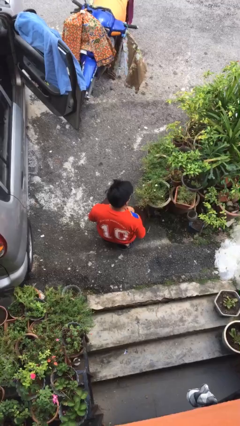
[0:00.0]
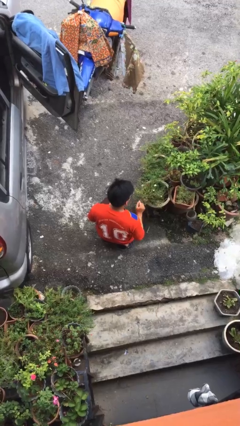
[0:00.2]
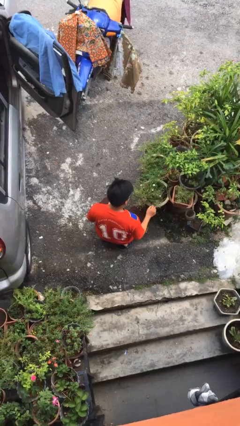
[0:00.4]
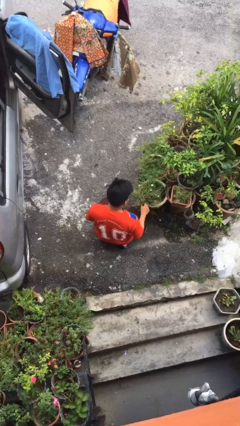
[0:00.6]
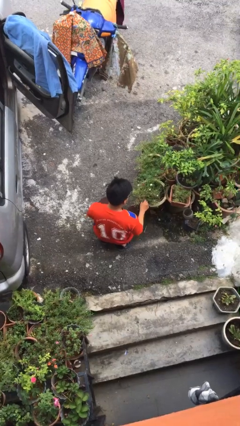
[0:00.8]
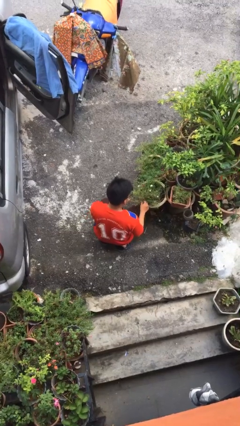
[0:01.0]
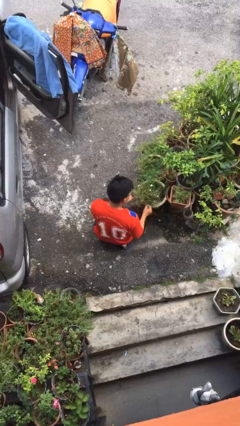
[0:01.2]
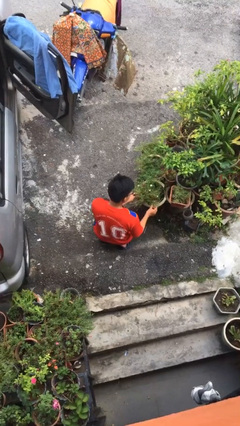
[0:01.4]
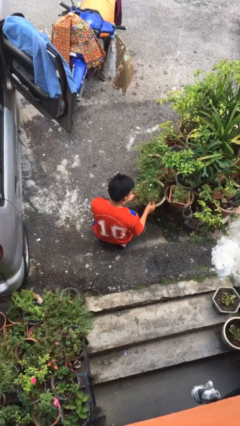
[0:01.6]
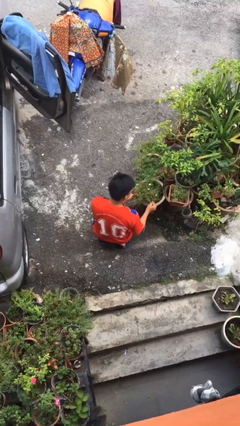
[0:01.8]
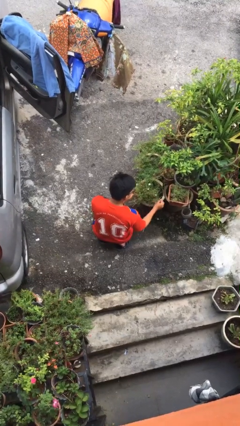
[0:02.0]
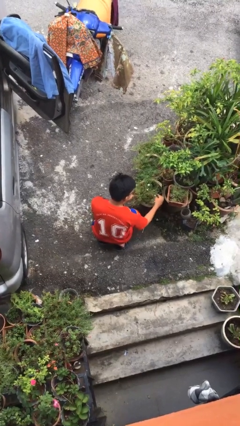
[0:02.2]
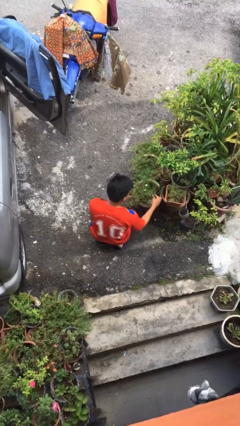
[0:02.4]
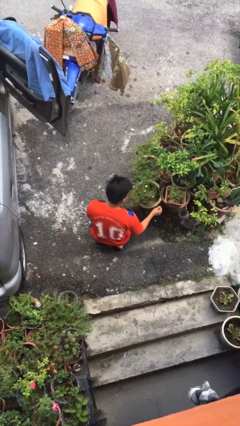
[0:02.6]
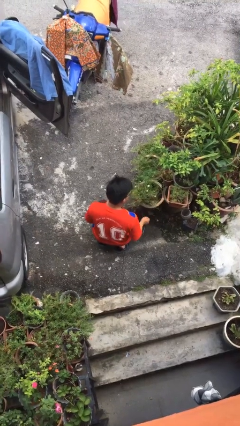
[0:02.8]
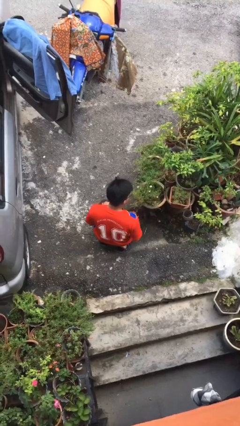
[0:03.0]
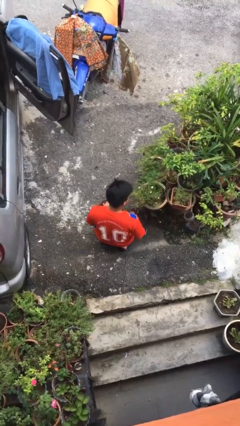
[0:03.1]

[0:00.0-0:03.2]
person arranges flowers in vase

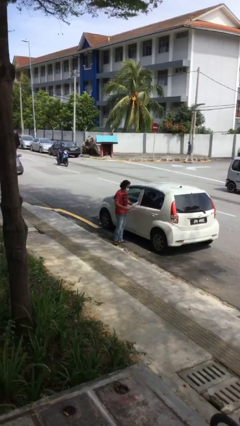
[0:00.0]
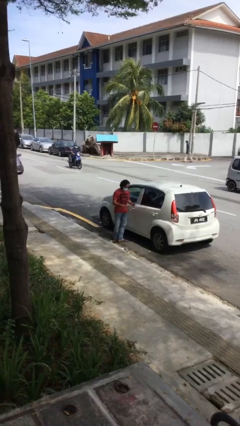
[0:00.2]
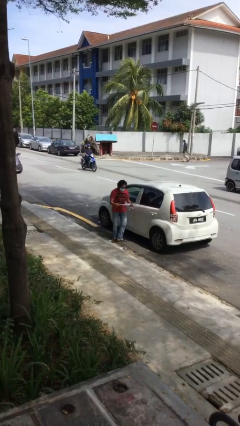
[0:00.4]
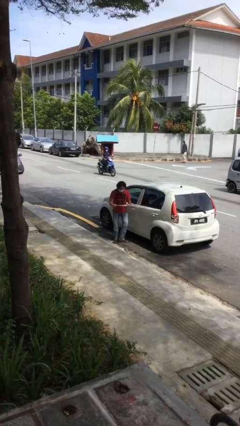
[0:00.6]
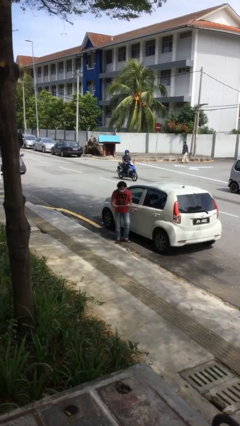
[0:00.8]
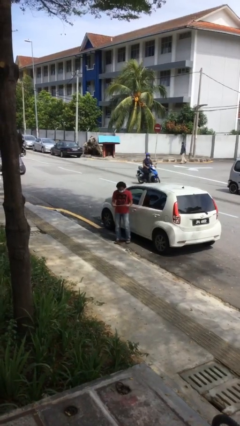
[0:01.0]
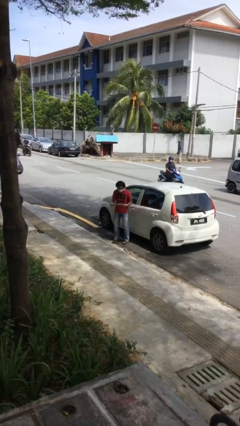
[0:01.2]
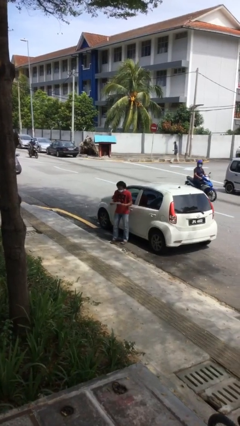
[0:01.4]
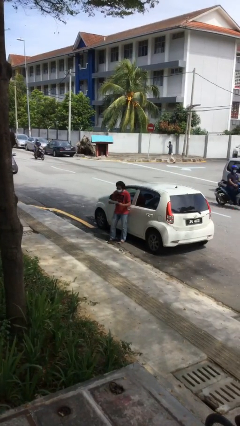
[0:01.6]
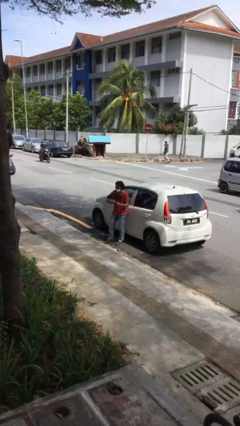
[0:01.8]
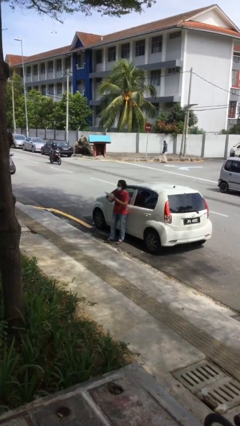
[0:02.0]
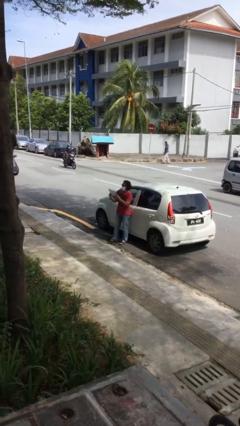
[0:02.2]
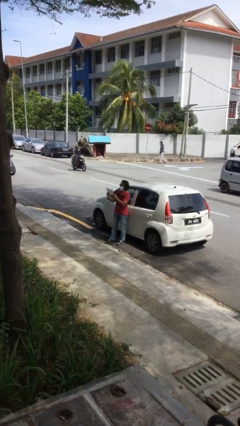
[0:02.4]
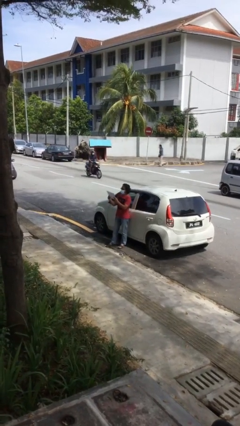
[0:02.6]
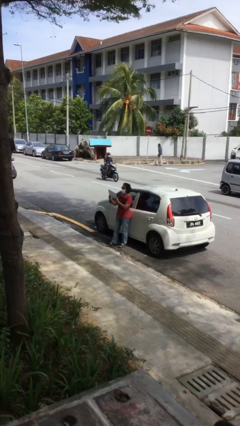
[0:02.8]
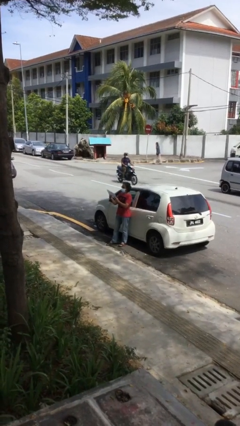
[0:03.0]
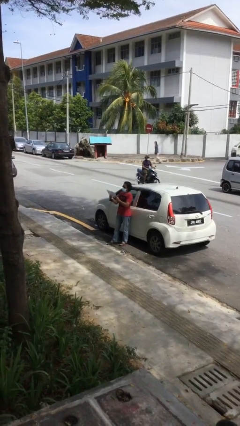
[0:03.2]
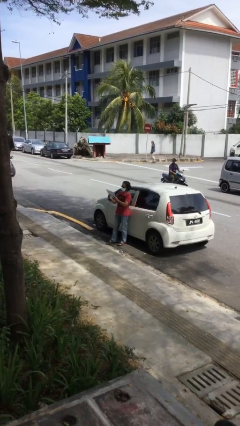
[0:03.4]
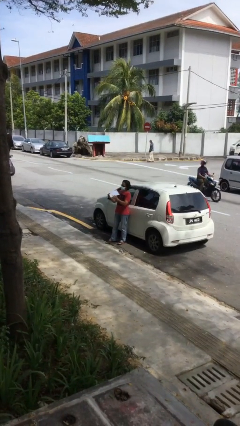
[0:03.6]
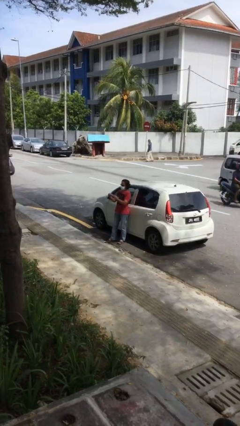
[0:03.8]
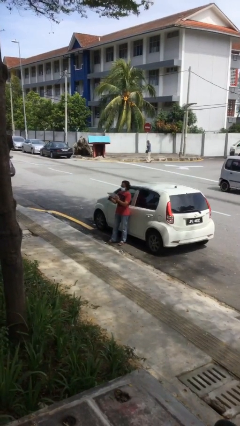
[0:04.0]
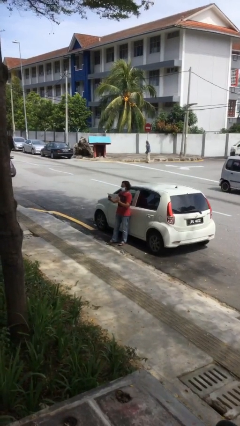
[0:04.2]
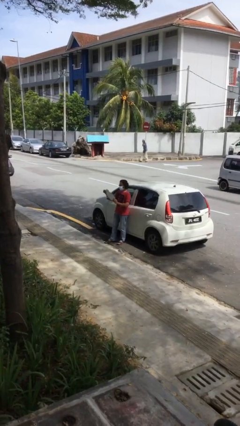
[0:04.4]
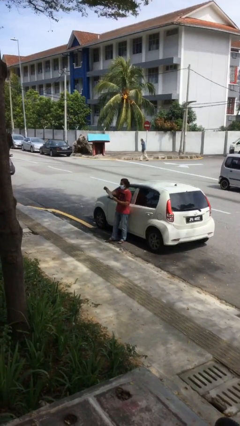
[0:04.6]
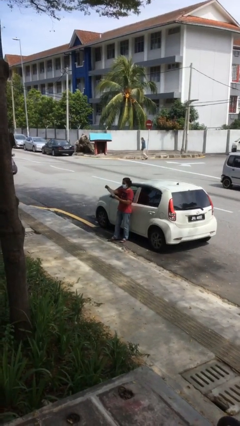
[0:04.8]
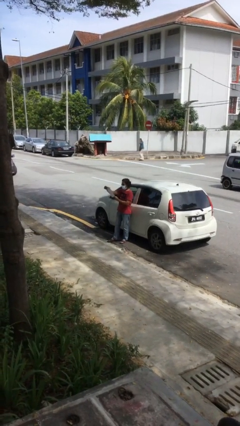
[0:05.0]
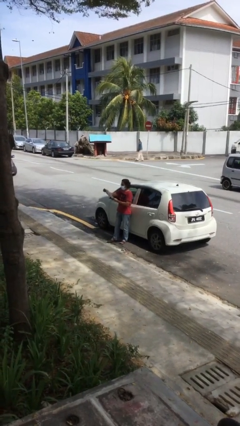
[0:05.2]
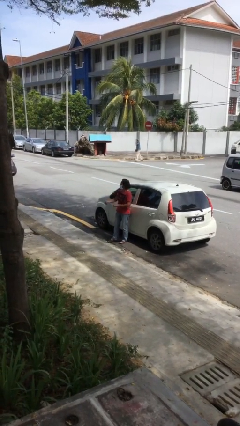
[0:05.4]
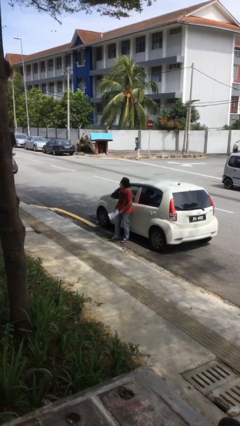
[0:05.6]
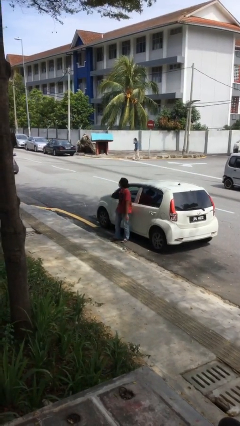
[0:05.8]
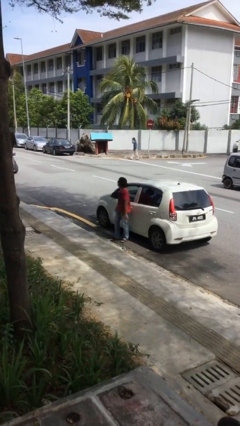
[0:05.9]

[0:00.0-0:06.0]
person reads document

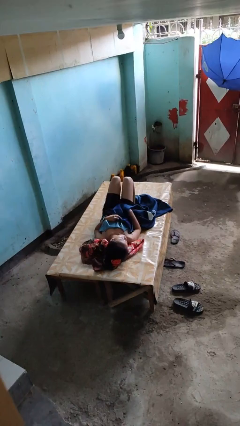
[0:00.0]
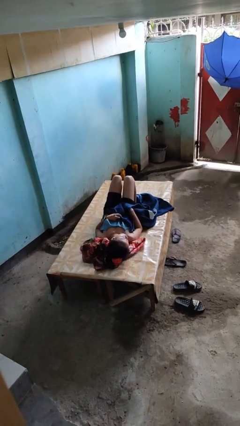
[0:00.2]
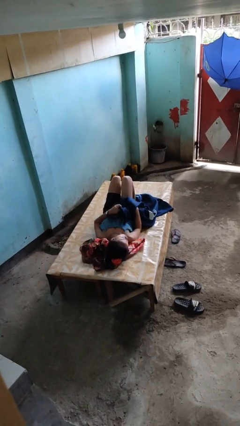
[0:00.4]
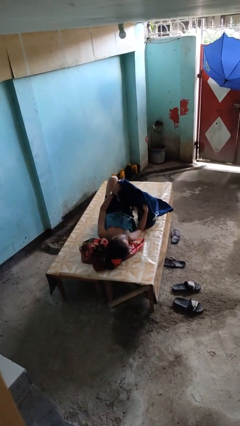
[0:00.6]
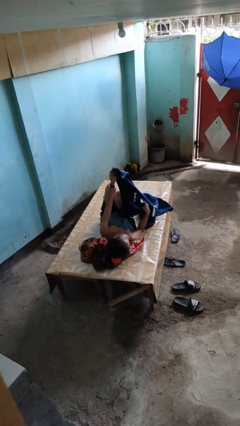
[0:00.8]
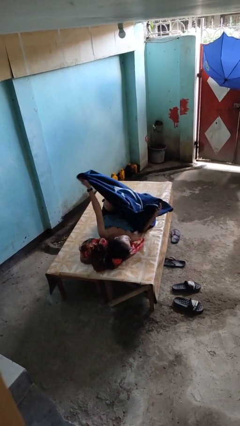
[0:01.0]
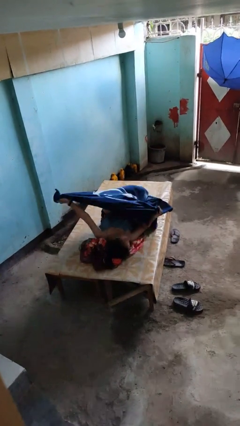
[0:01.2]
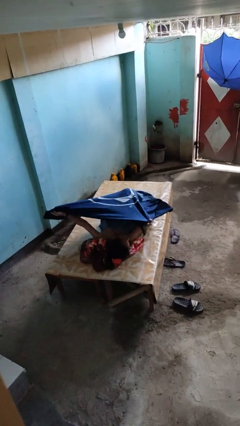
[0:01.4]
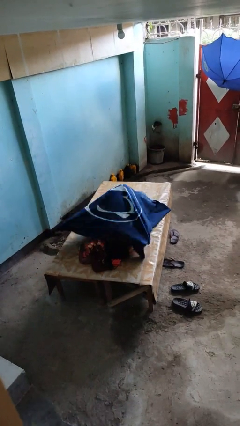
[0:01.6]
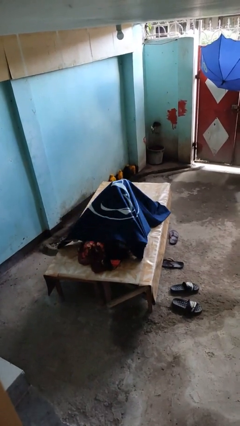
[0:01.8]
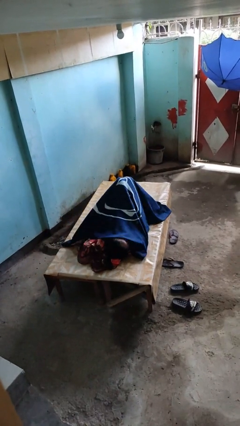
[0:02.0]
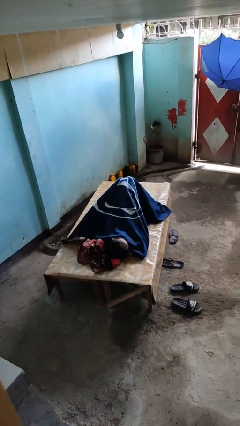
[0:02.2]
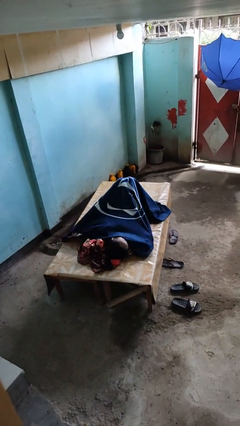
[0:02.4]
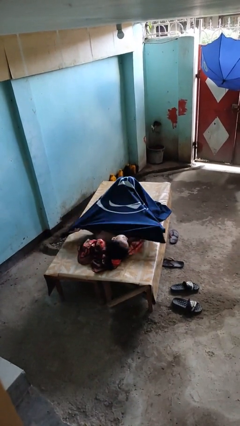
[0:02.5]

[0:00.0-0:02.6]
person covers with bedsheets

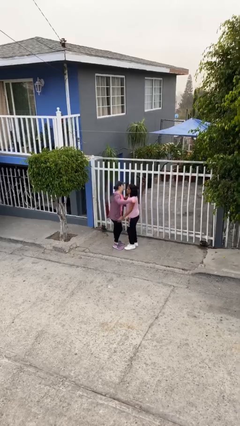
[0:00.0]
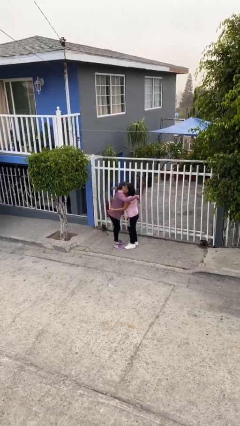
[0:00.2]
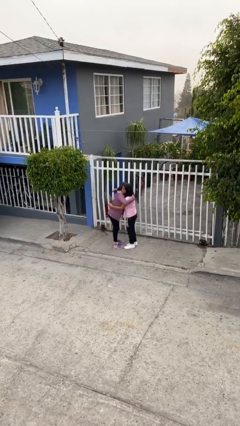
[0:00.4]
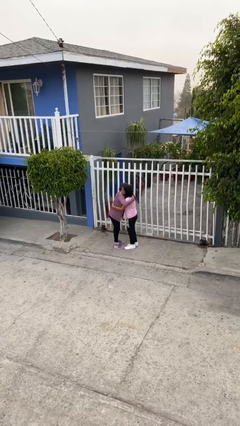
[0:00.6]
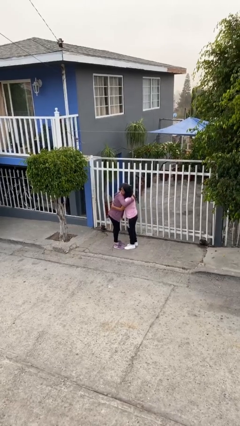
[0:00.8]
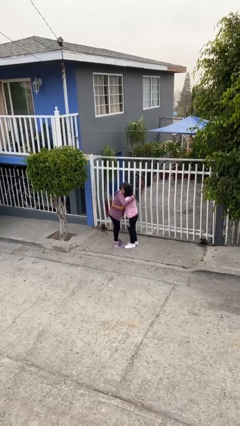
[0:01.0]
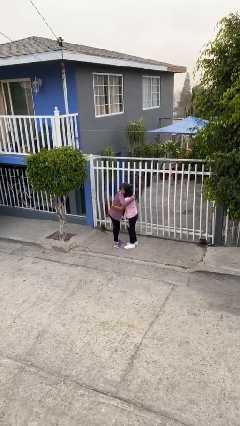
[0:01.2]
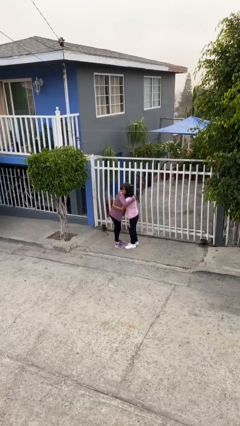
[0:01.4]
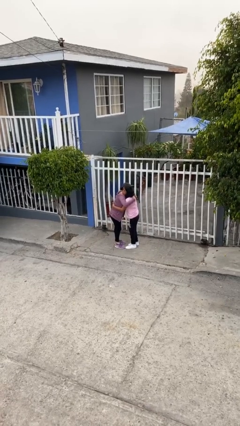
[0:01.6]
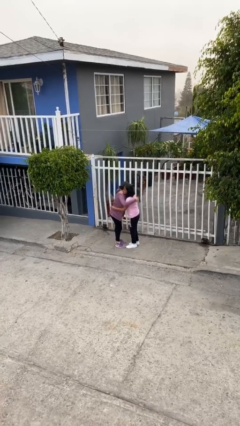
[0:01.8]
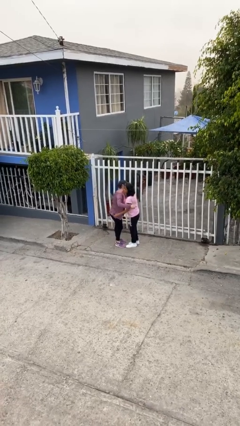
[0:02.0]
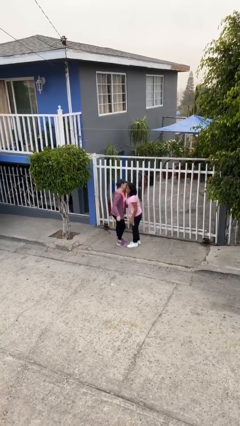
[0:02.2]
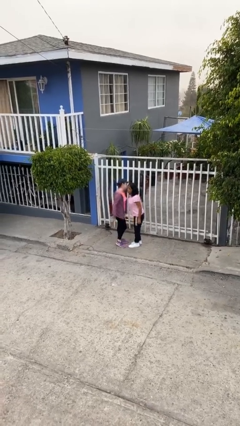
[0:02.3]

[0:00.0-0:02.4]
person embraces person

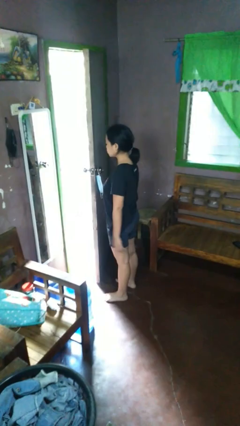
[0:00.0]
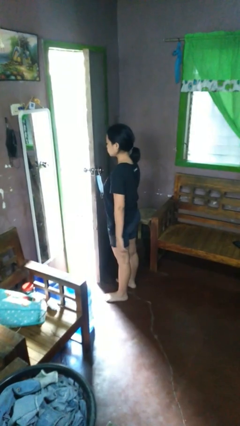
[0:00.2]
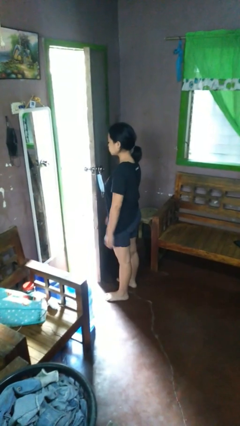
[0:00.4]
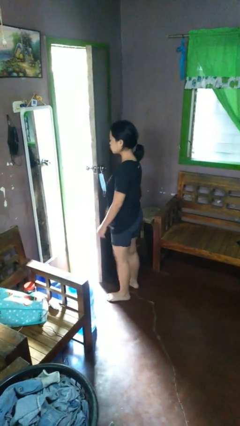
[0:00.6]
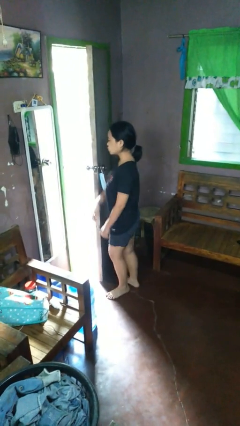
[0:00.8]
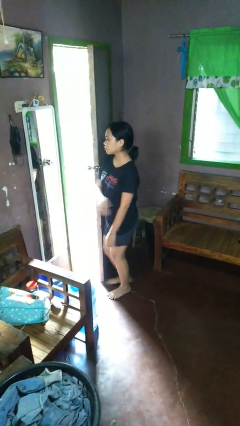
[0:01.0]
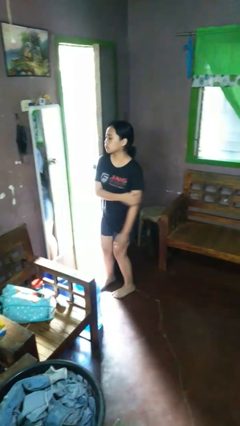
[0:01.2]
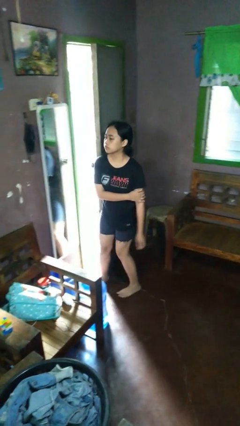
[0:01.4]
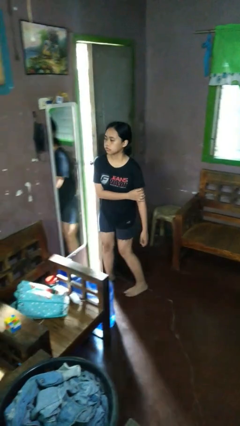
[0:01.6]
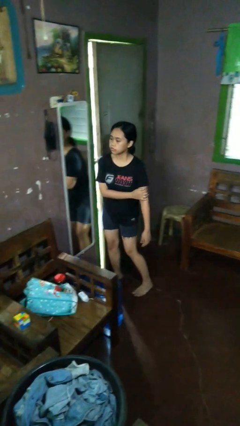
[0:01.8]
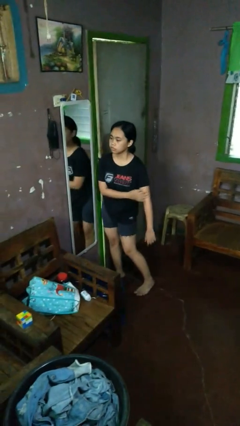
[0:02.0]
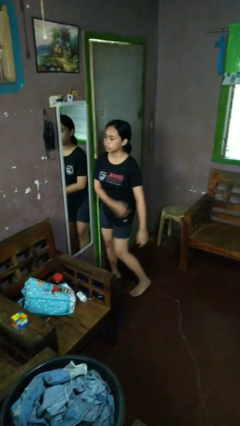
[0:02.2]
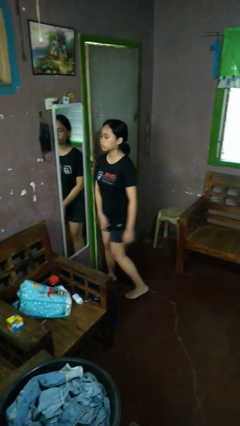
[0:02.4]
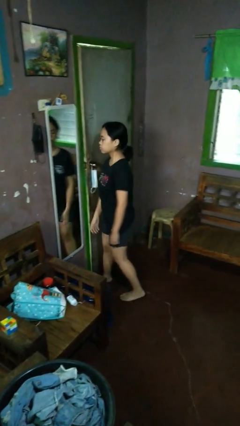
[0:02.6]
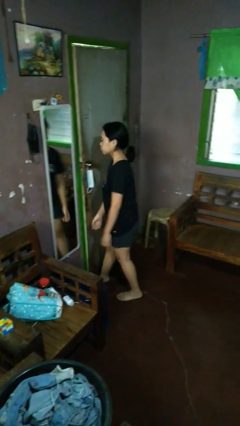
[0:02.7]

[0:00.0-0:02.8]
person closes door with hip

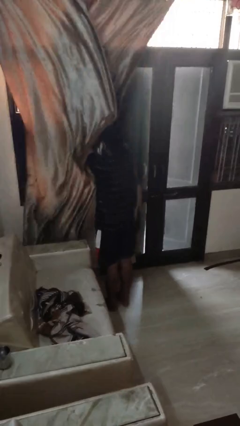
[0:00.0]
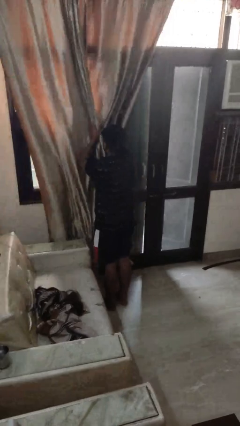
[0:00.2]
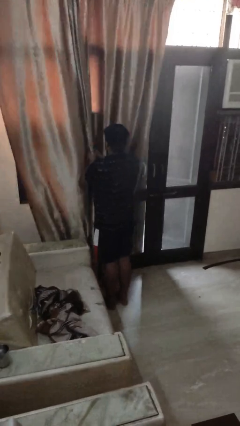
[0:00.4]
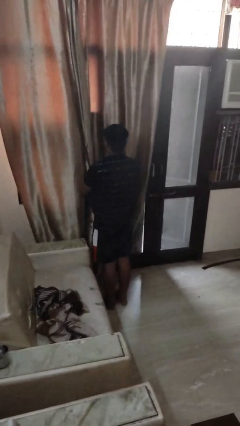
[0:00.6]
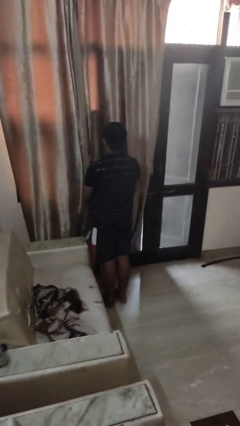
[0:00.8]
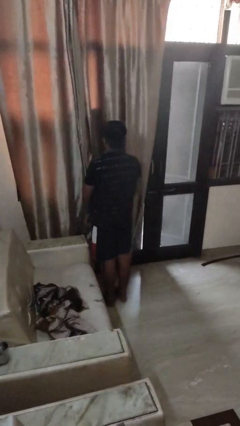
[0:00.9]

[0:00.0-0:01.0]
person closes curtains
